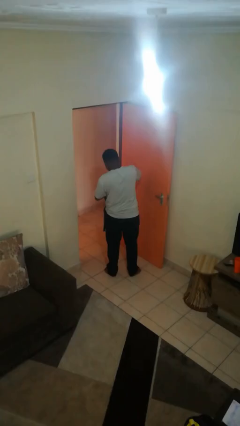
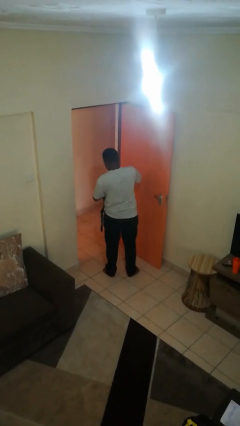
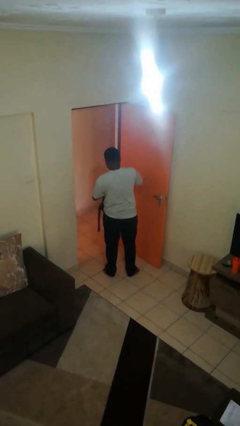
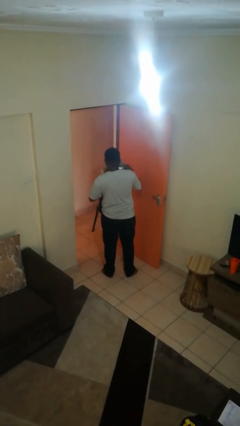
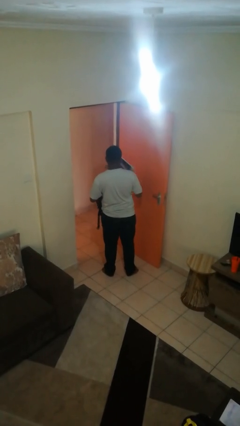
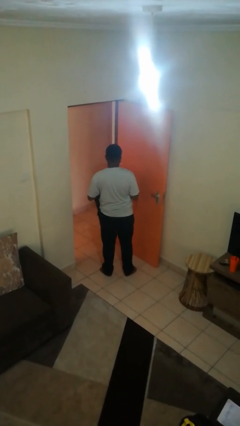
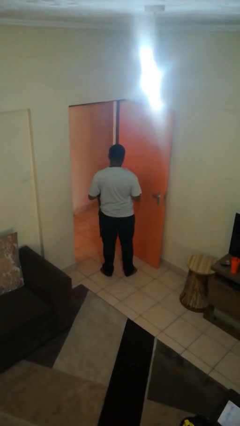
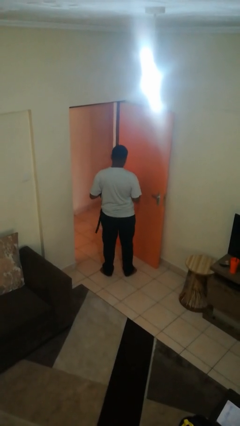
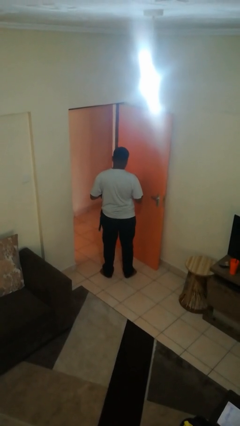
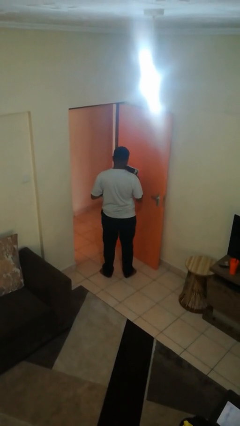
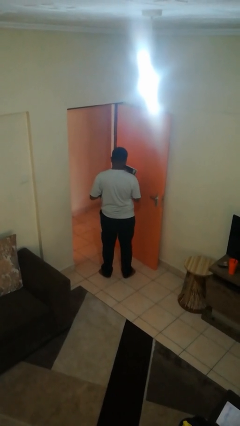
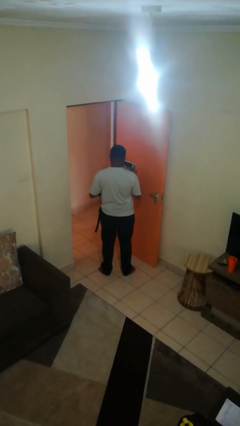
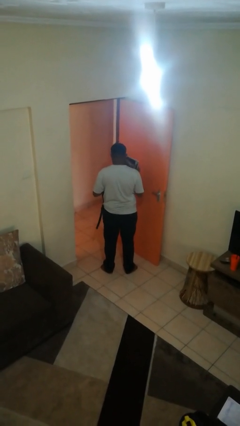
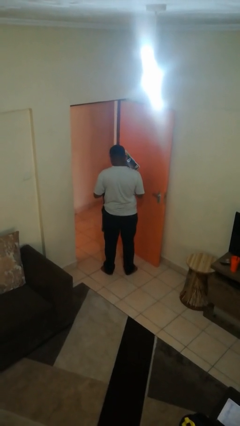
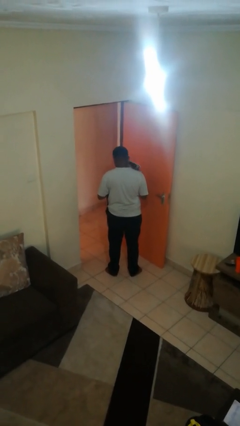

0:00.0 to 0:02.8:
person takes object from backpack

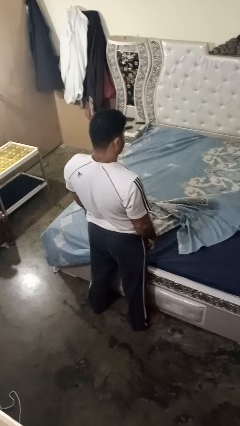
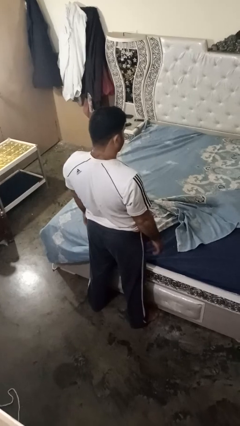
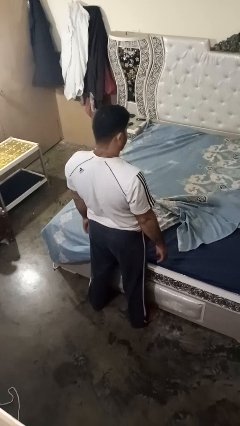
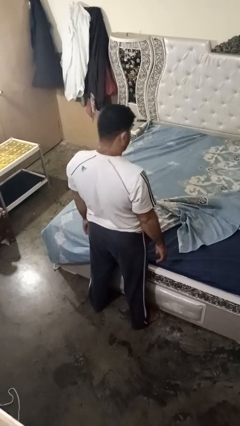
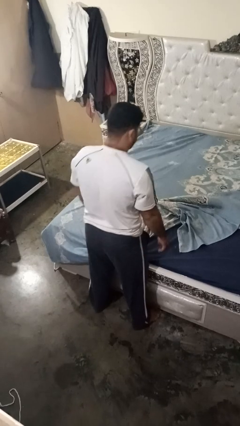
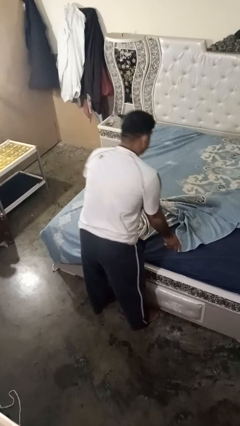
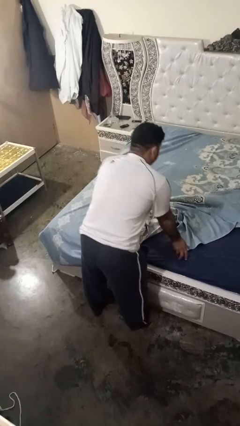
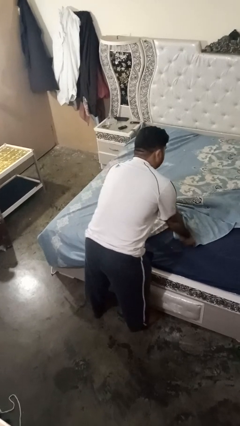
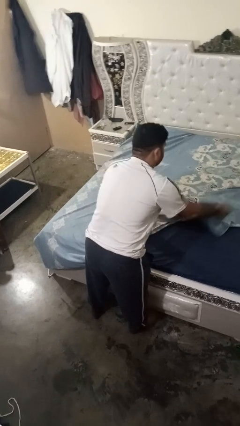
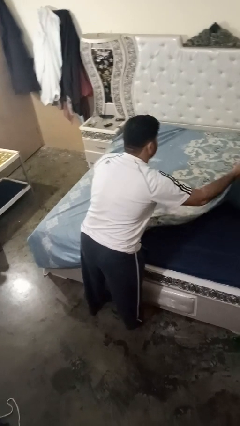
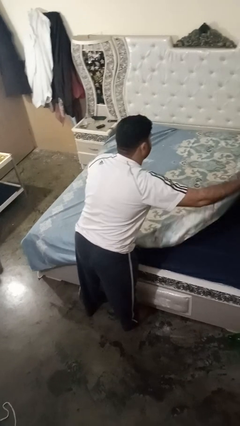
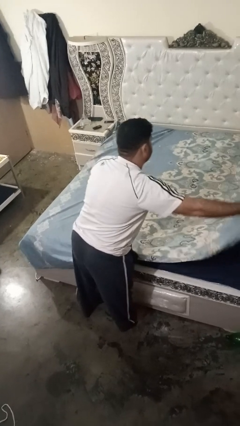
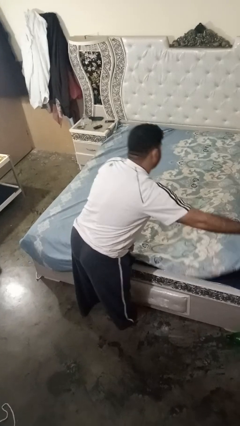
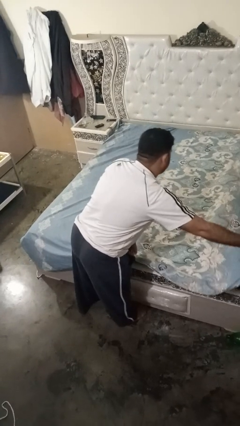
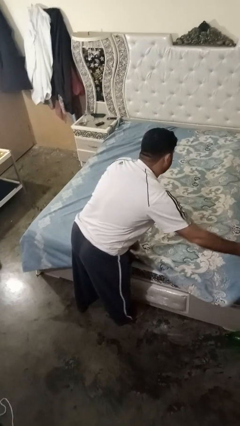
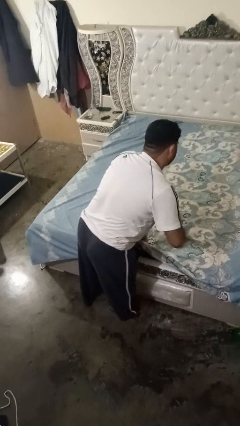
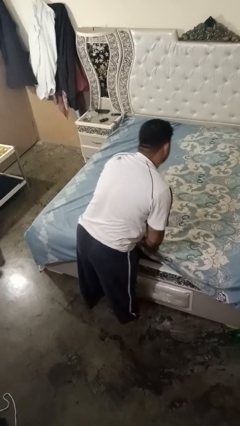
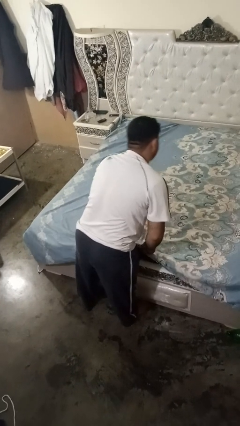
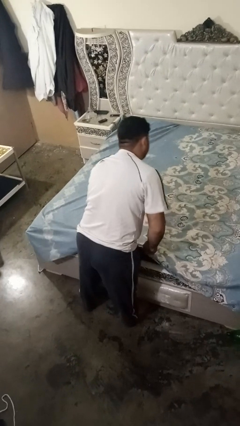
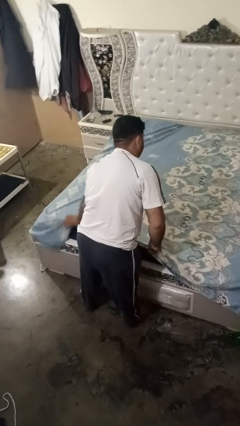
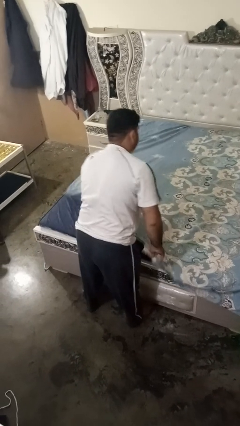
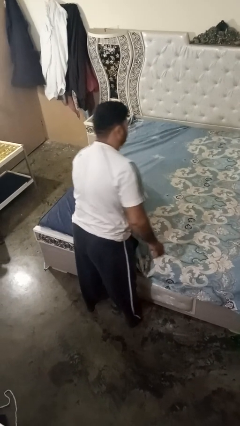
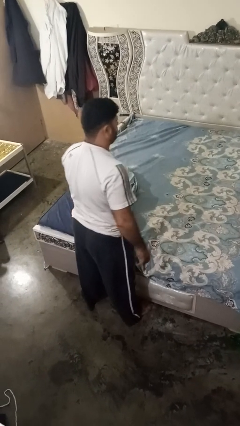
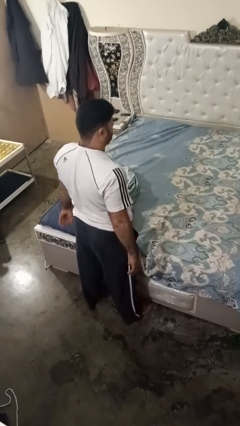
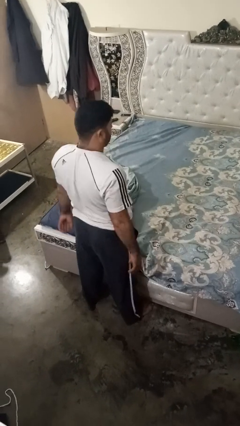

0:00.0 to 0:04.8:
person makes bed

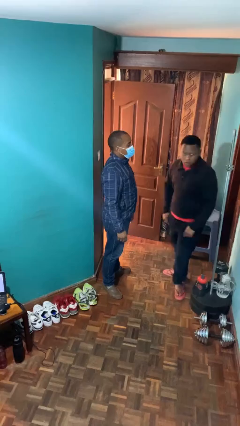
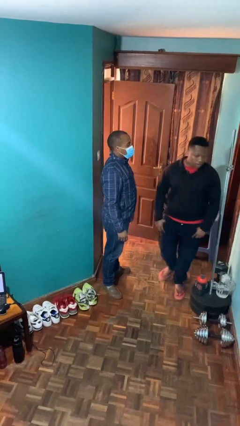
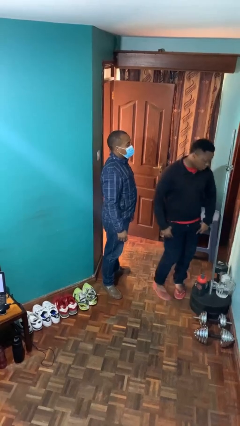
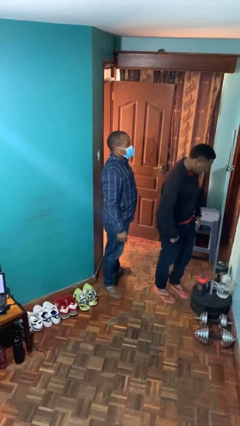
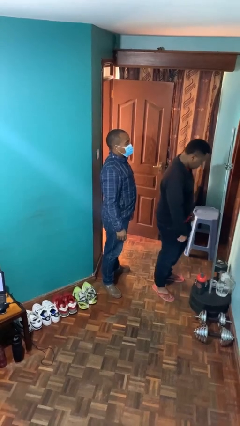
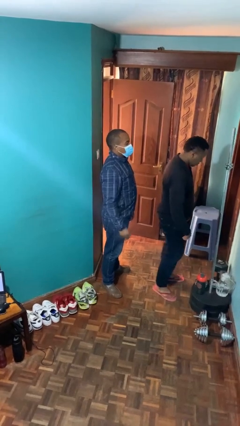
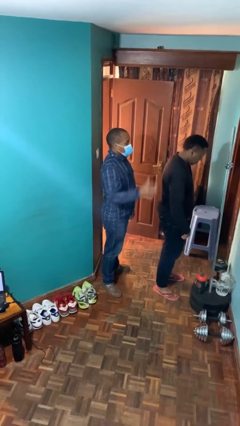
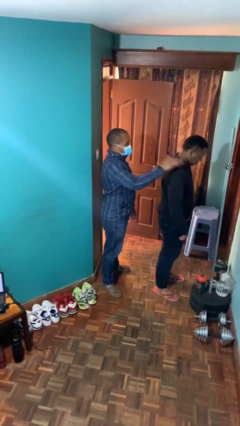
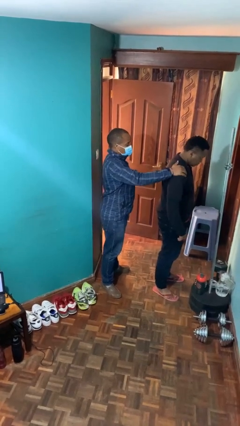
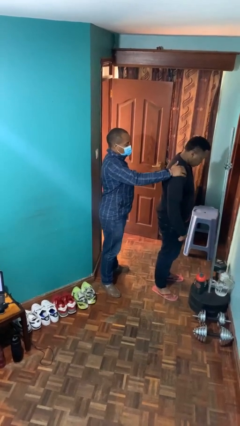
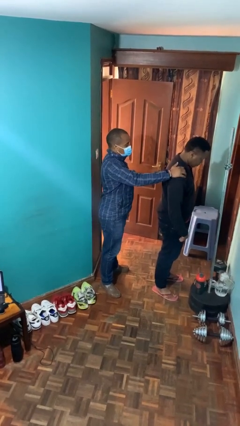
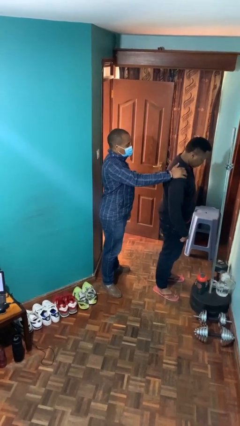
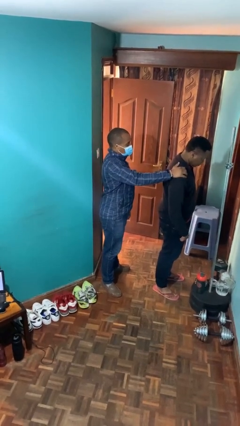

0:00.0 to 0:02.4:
person grabs person by shoulder

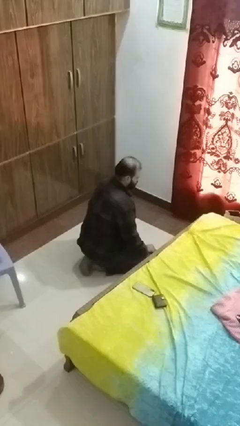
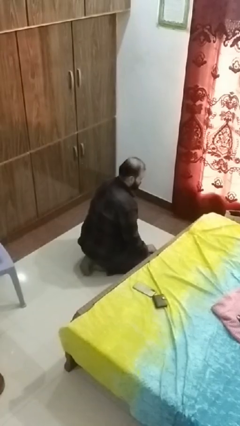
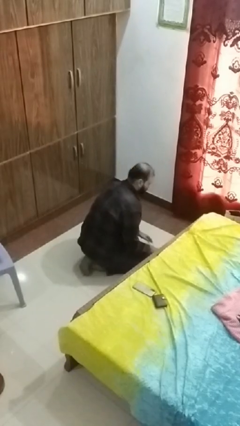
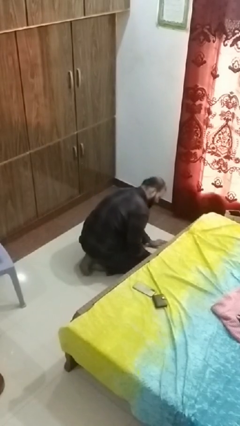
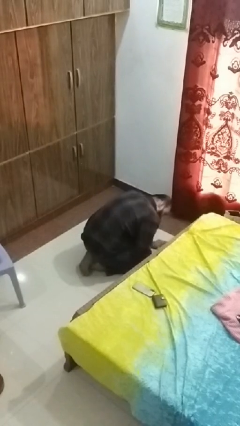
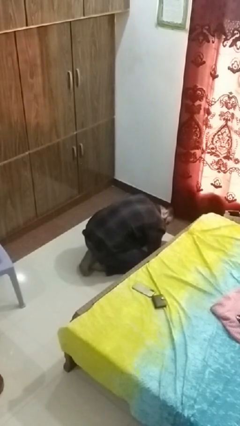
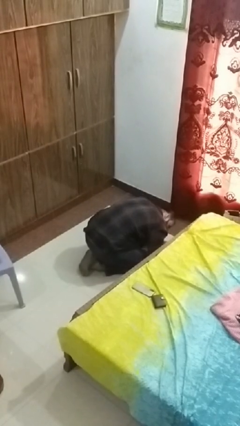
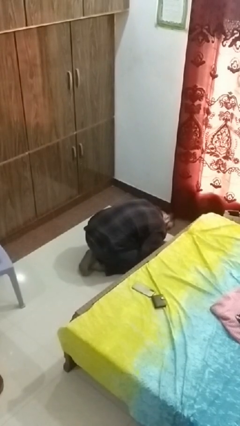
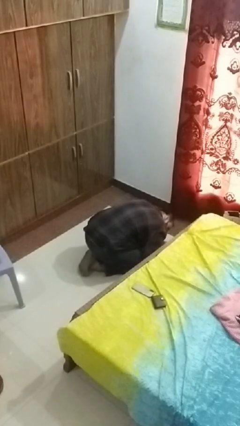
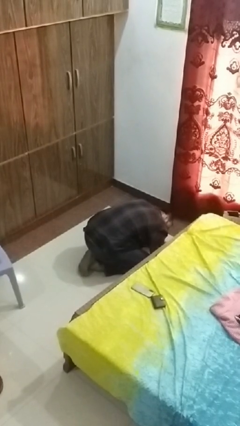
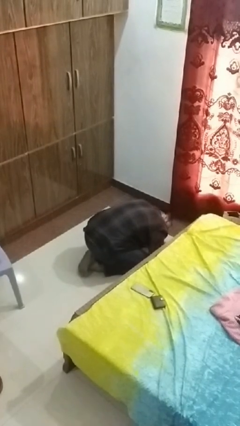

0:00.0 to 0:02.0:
person searches under bed

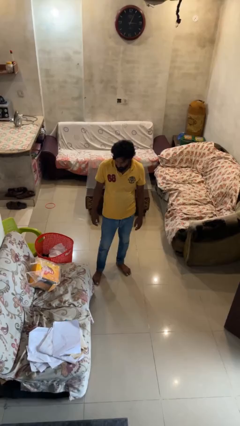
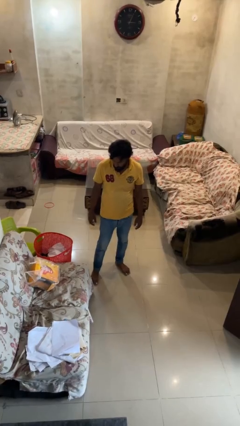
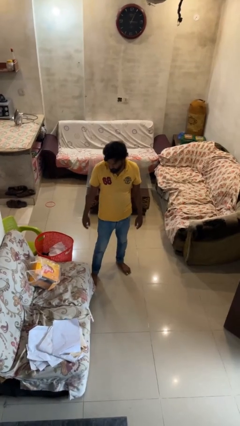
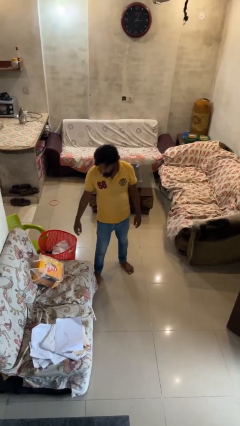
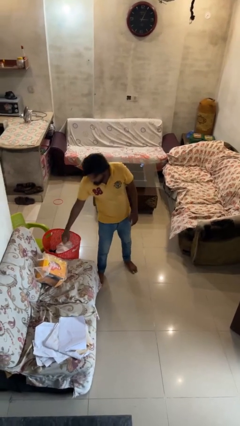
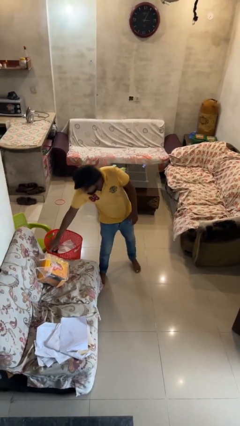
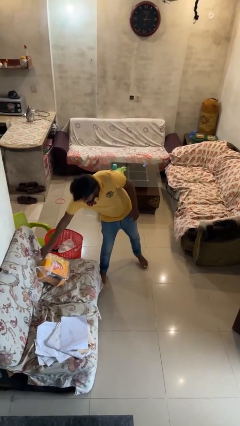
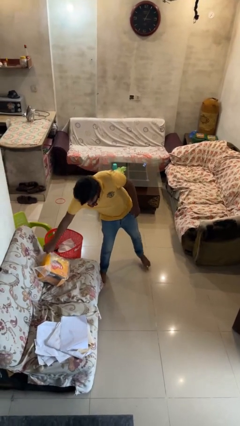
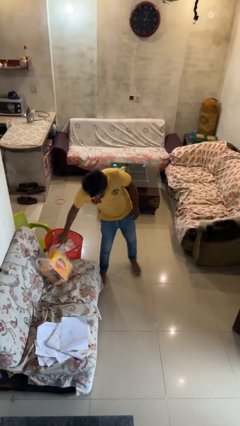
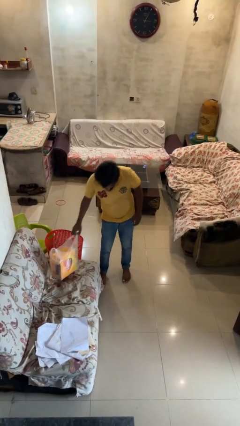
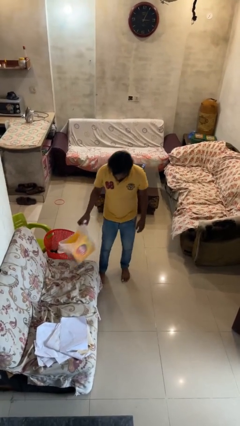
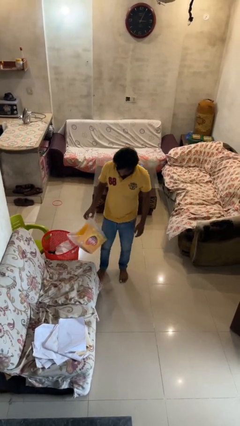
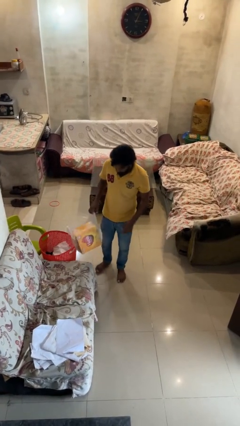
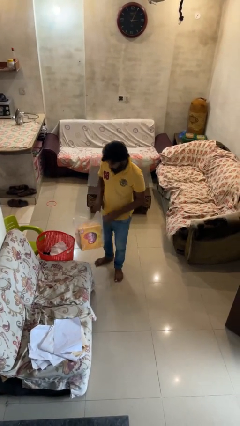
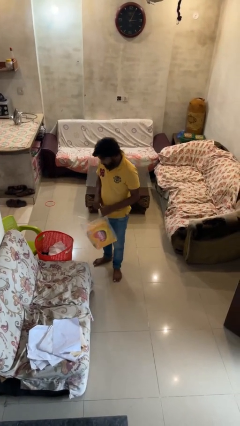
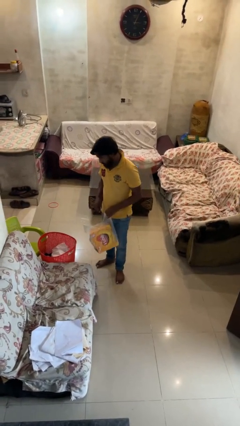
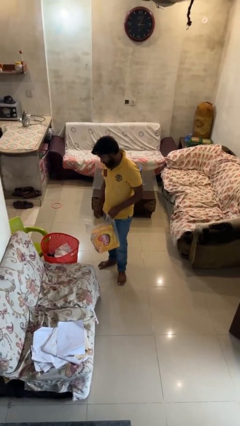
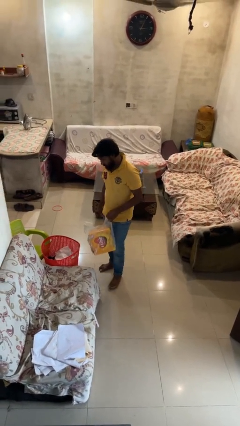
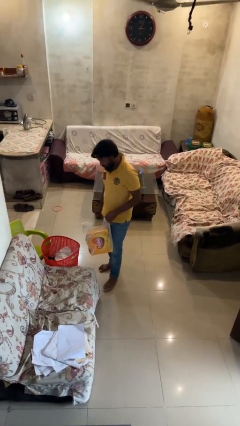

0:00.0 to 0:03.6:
person picks up object from couch

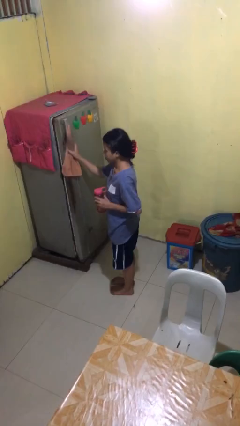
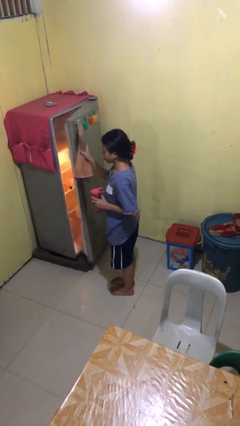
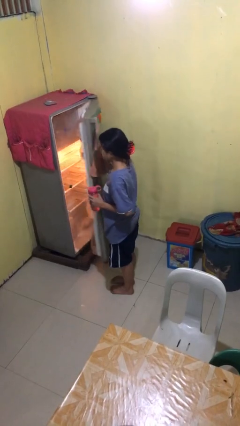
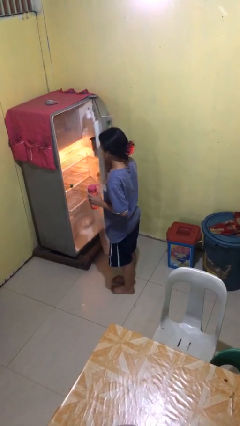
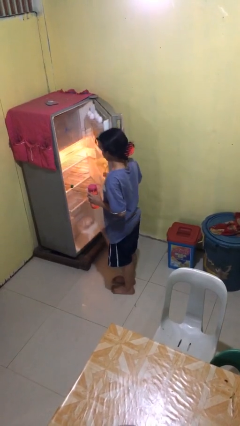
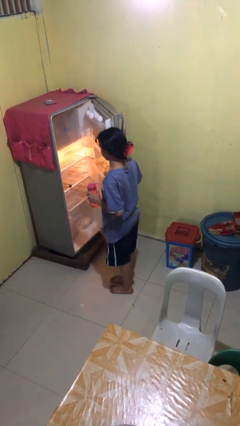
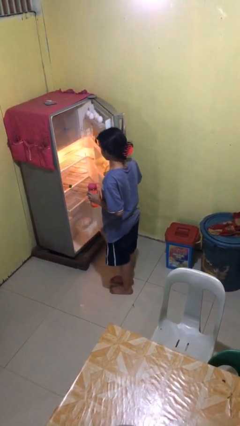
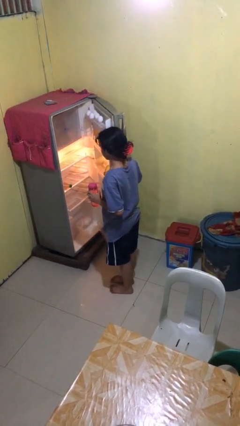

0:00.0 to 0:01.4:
person opens refrigerator
